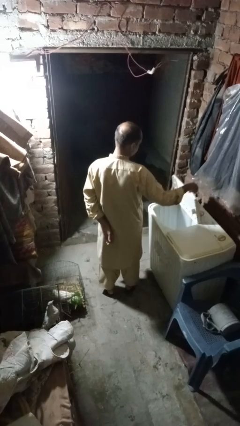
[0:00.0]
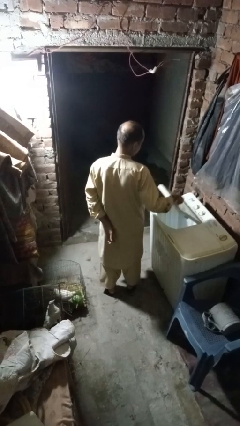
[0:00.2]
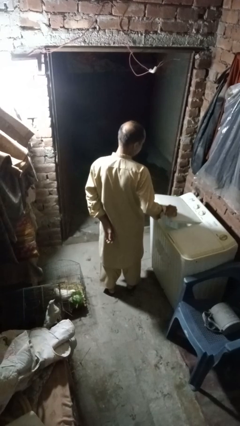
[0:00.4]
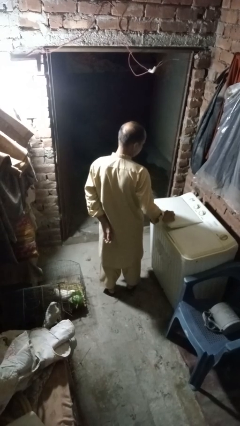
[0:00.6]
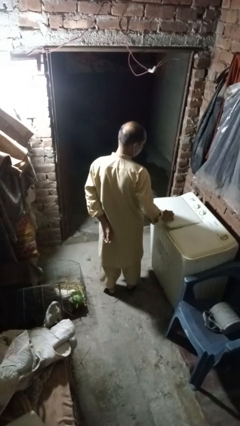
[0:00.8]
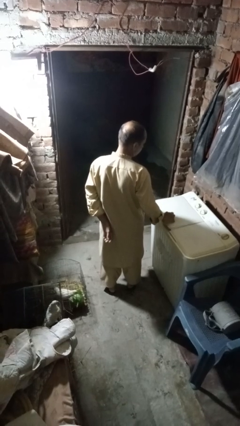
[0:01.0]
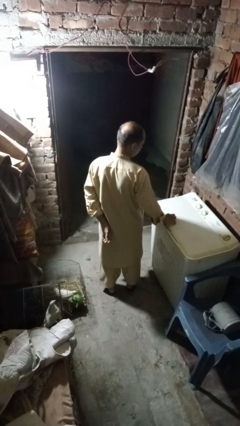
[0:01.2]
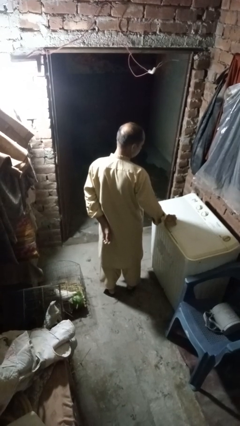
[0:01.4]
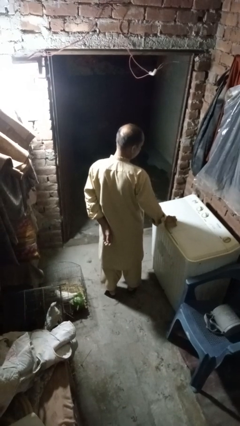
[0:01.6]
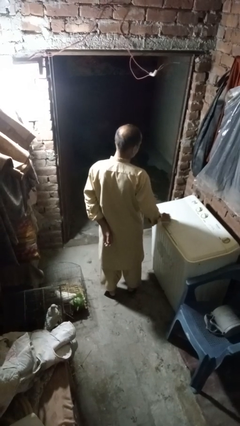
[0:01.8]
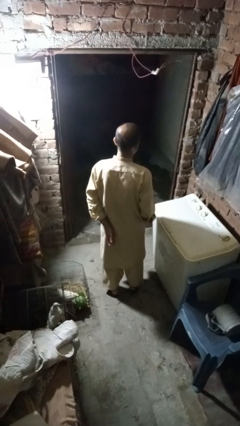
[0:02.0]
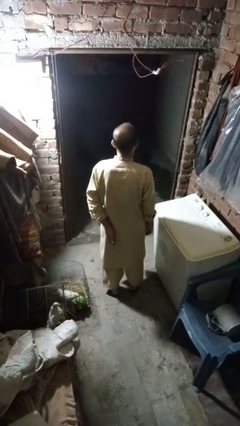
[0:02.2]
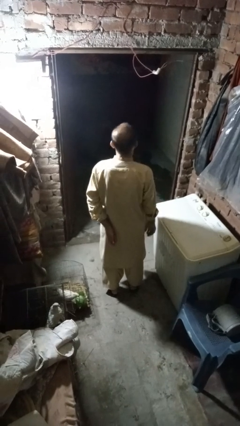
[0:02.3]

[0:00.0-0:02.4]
person closes clothes washer

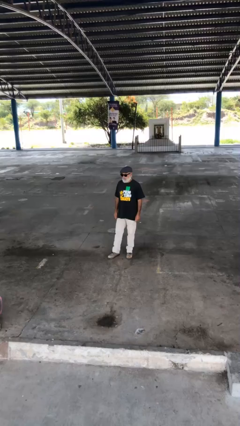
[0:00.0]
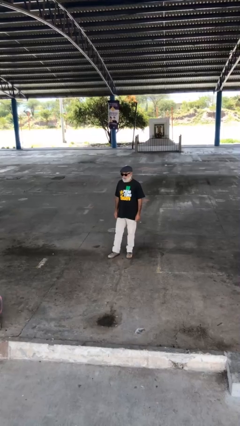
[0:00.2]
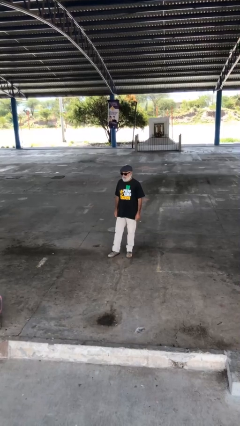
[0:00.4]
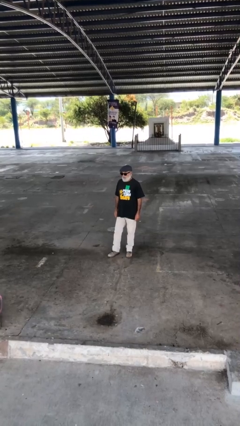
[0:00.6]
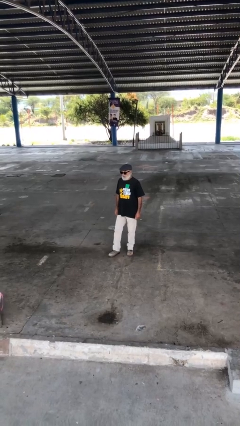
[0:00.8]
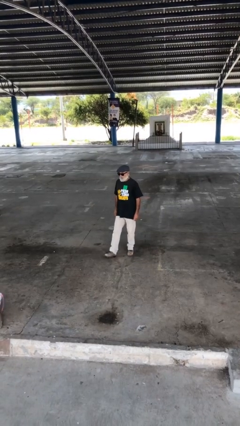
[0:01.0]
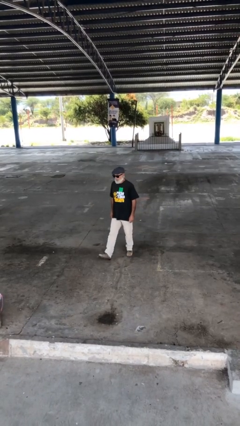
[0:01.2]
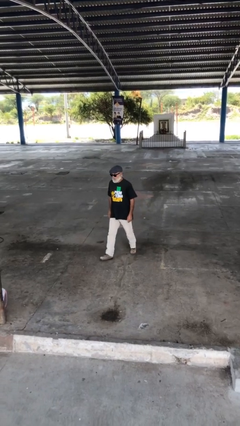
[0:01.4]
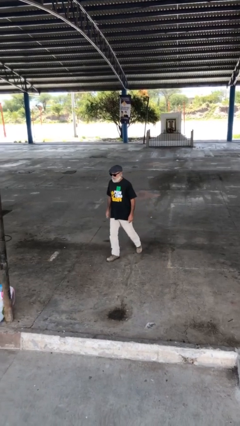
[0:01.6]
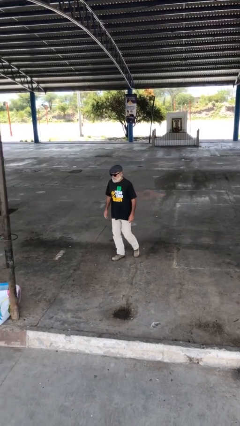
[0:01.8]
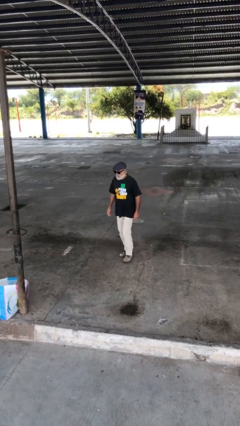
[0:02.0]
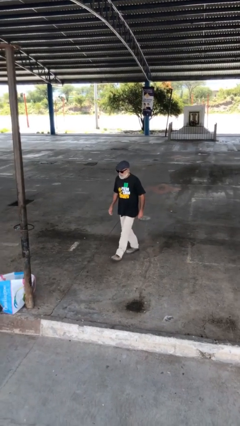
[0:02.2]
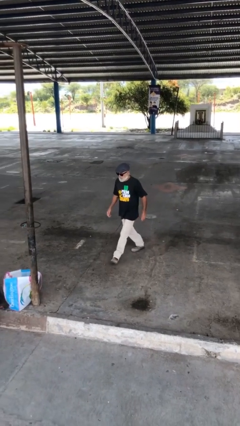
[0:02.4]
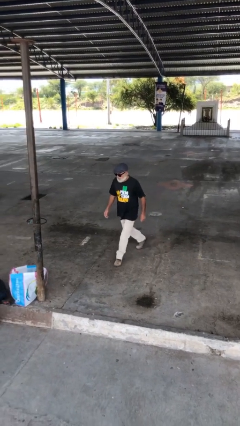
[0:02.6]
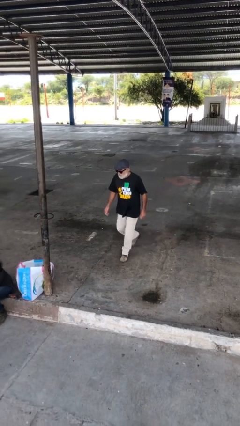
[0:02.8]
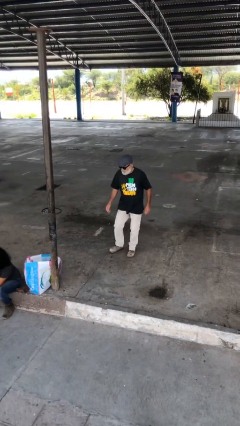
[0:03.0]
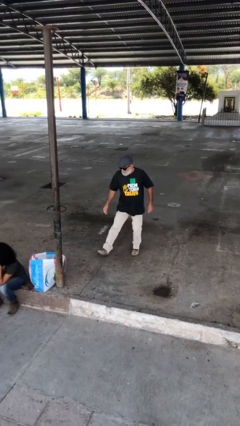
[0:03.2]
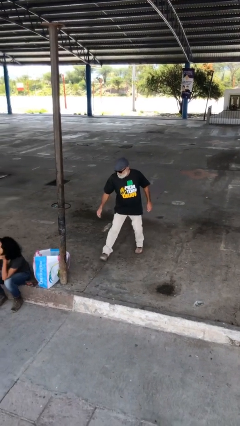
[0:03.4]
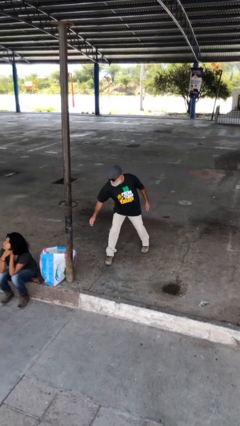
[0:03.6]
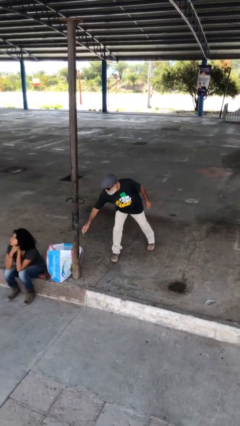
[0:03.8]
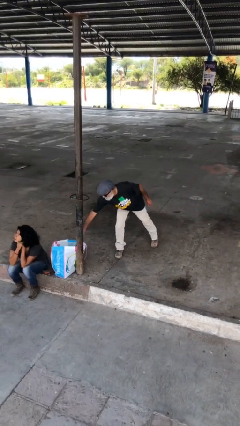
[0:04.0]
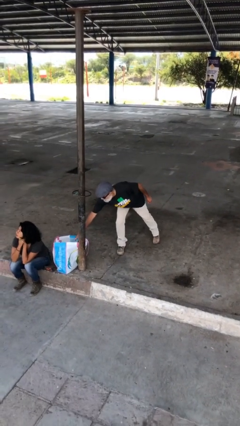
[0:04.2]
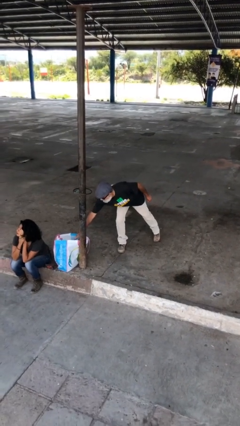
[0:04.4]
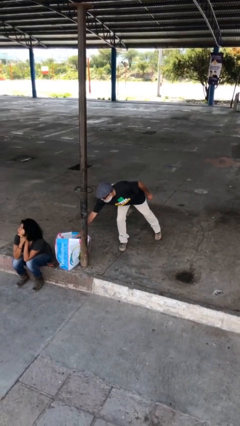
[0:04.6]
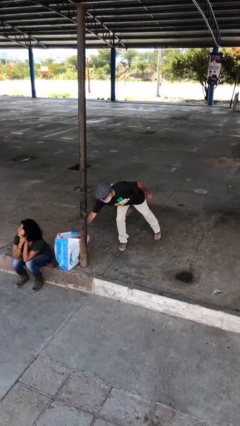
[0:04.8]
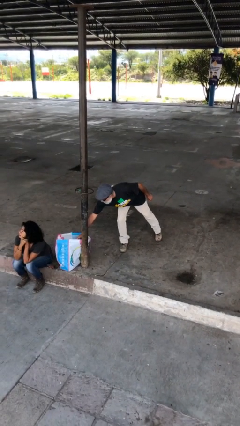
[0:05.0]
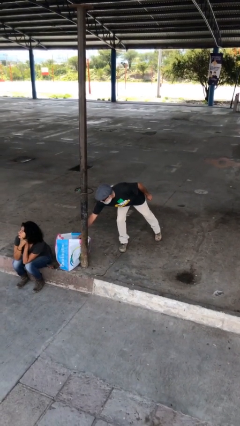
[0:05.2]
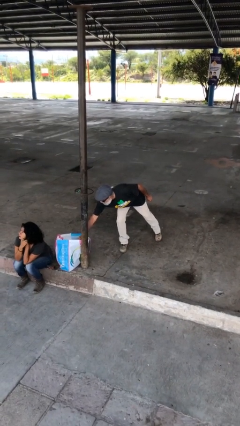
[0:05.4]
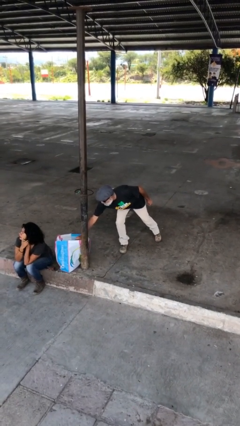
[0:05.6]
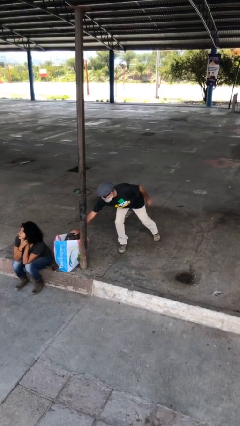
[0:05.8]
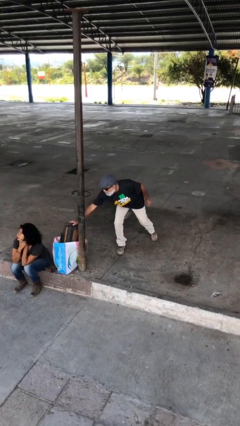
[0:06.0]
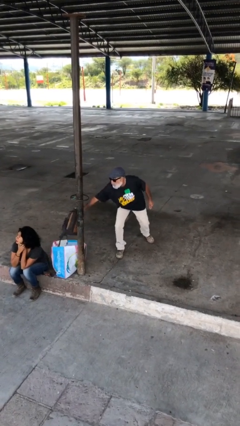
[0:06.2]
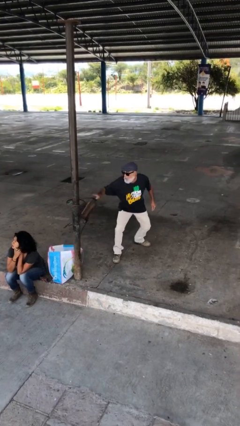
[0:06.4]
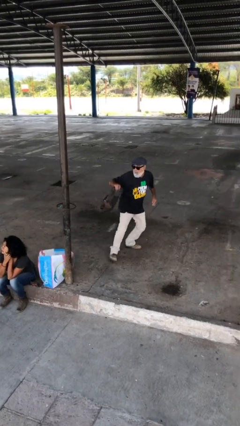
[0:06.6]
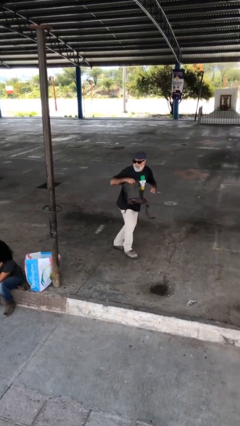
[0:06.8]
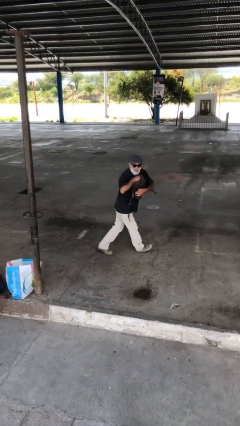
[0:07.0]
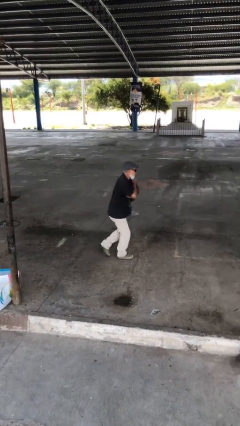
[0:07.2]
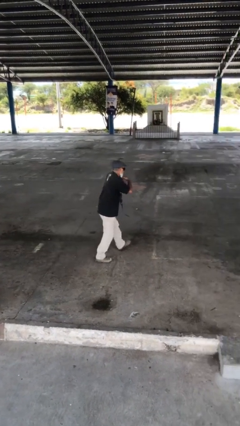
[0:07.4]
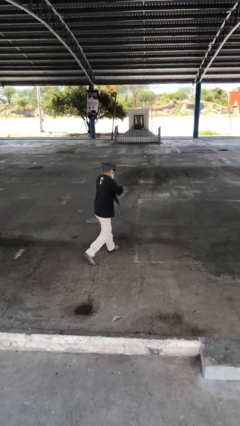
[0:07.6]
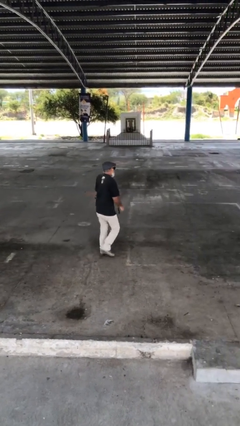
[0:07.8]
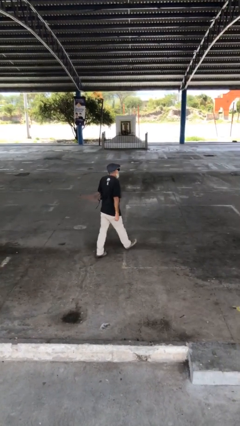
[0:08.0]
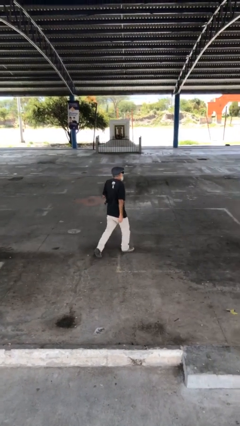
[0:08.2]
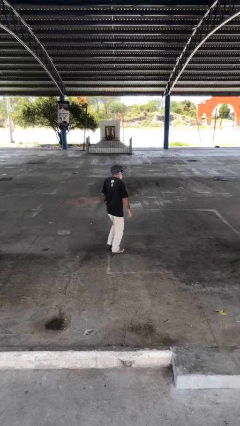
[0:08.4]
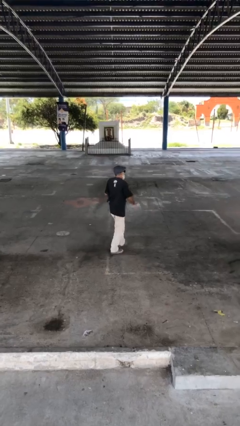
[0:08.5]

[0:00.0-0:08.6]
person steals object from person

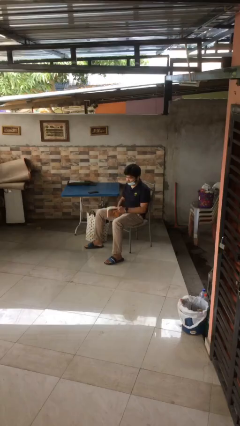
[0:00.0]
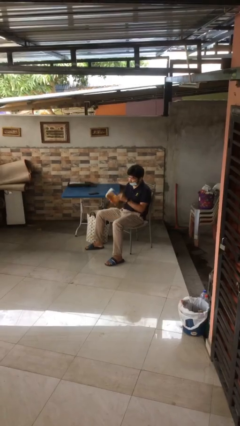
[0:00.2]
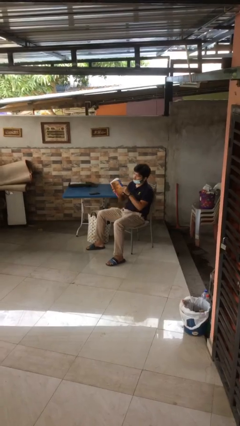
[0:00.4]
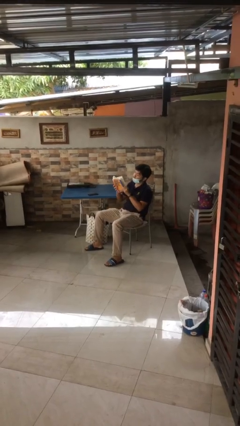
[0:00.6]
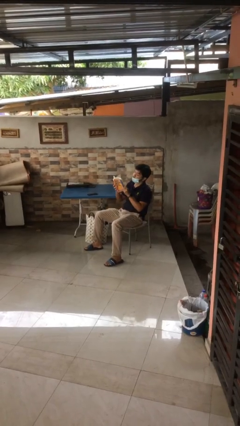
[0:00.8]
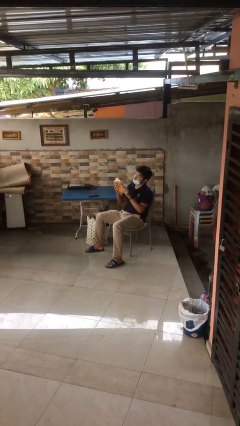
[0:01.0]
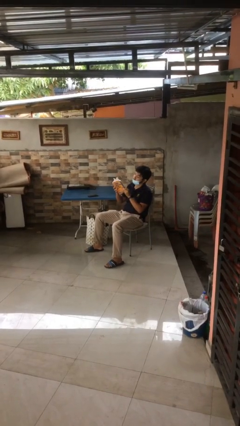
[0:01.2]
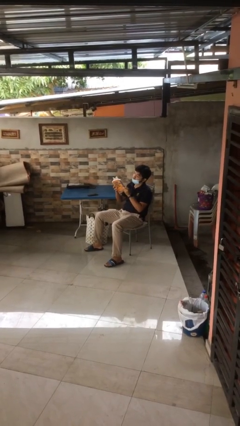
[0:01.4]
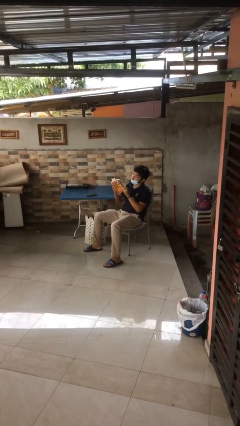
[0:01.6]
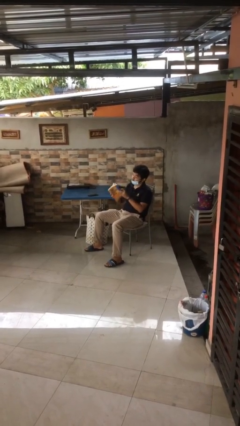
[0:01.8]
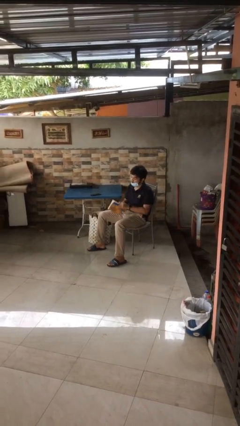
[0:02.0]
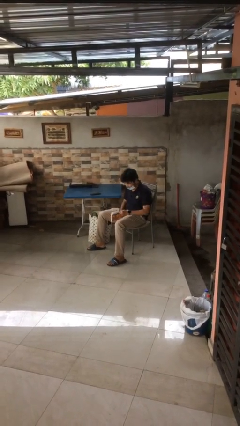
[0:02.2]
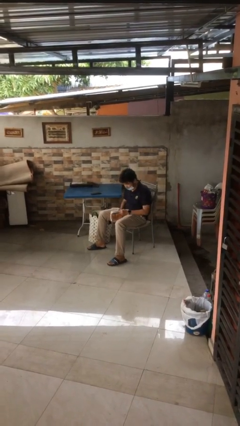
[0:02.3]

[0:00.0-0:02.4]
person reads book

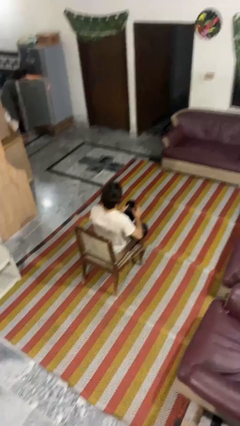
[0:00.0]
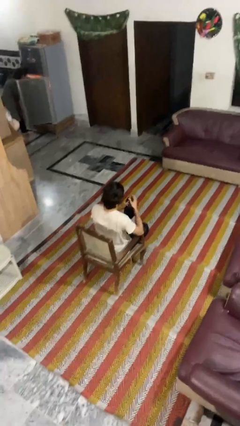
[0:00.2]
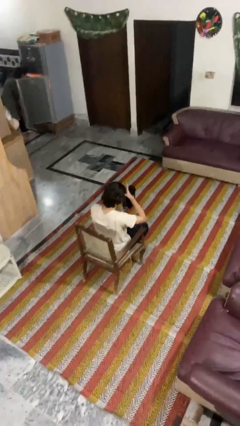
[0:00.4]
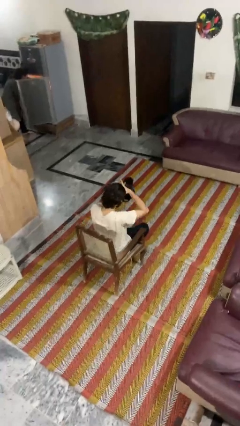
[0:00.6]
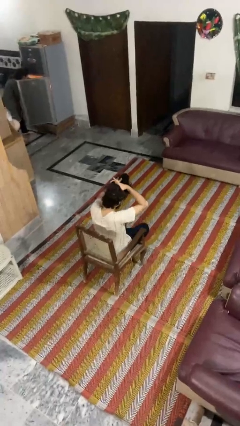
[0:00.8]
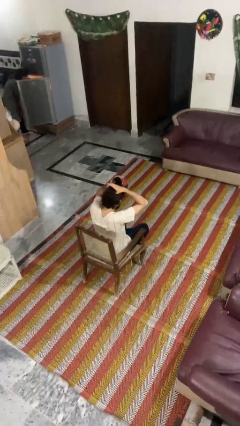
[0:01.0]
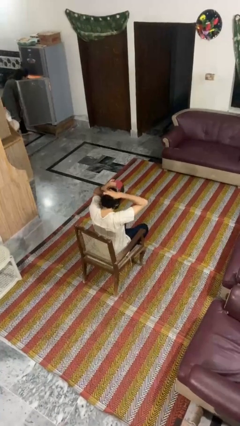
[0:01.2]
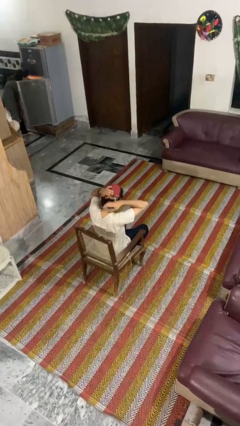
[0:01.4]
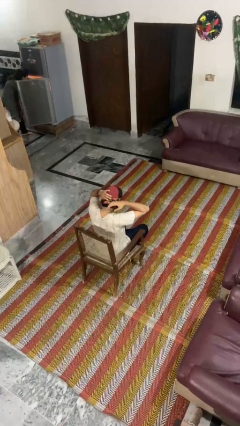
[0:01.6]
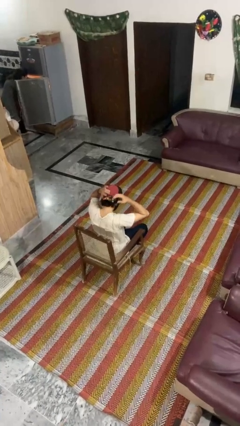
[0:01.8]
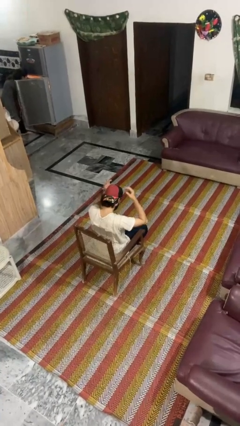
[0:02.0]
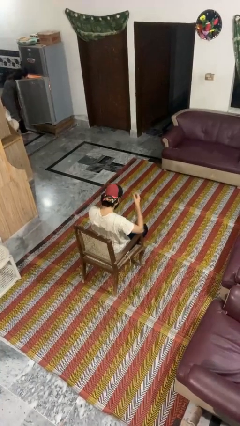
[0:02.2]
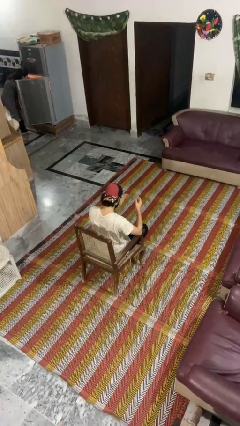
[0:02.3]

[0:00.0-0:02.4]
person puts on hat

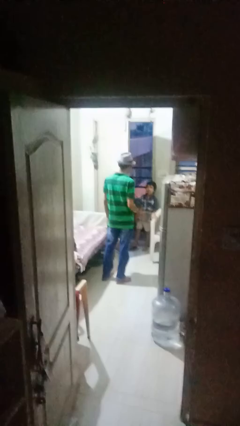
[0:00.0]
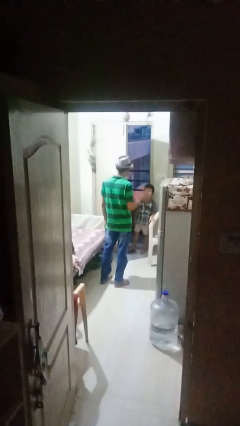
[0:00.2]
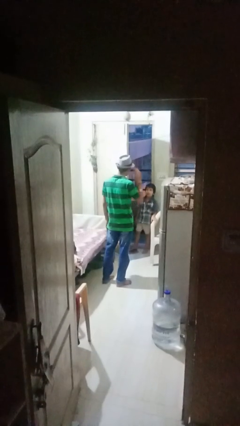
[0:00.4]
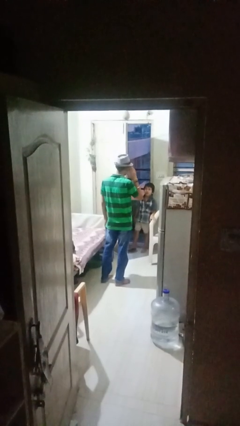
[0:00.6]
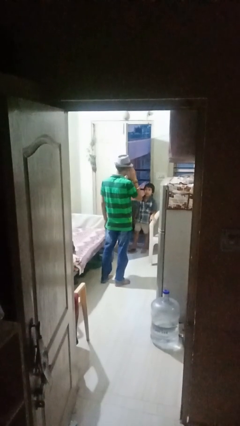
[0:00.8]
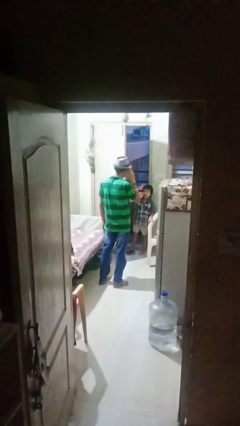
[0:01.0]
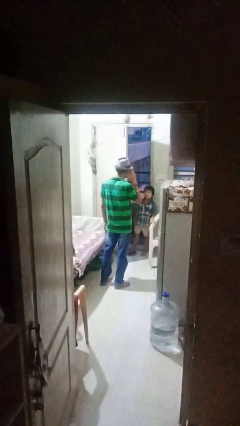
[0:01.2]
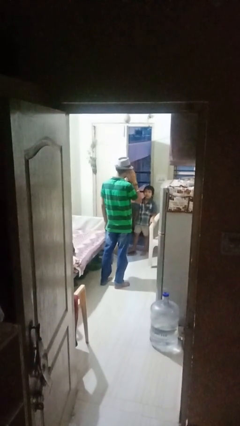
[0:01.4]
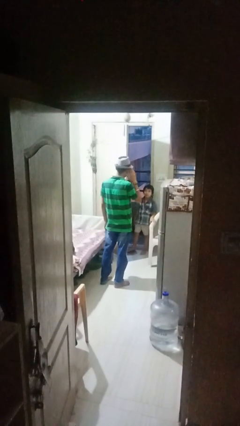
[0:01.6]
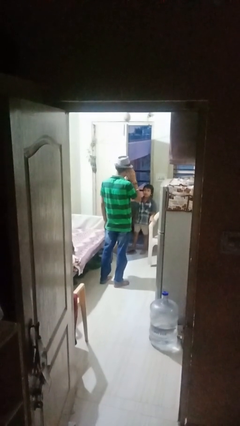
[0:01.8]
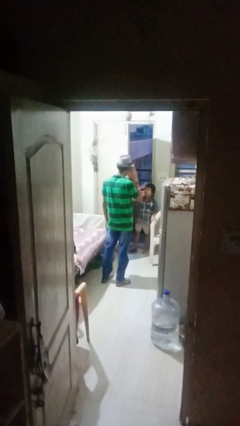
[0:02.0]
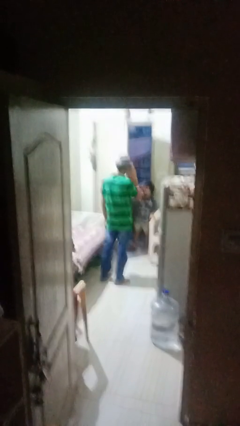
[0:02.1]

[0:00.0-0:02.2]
person salutes
